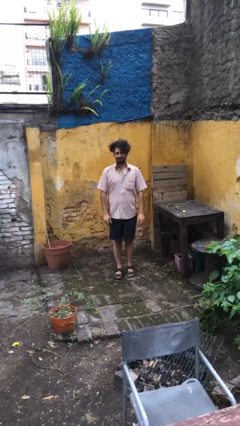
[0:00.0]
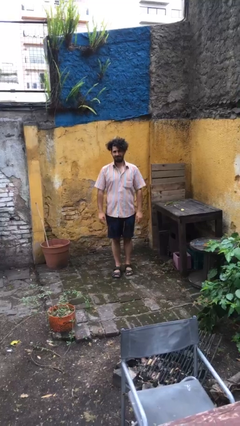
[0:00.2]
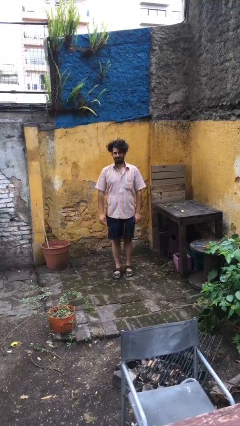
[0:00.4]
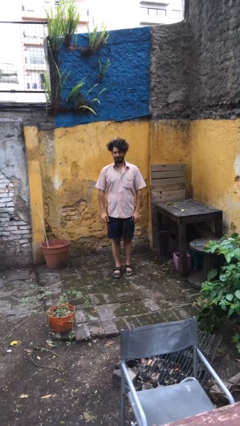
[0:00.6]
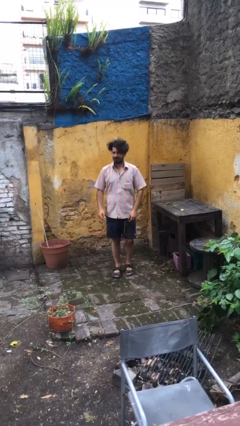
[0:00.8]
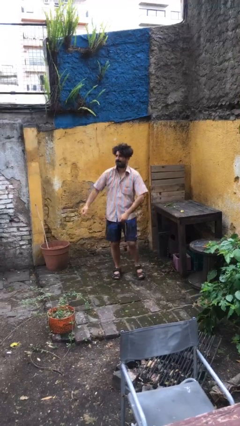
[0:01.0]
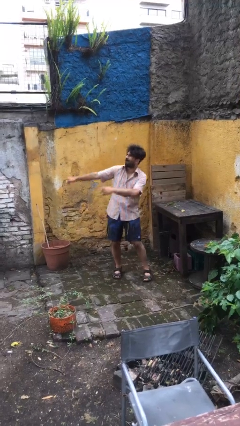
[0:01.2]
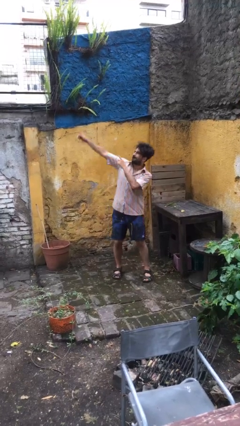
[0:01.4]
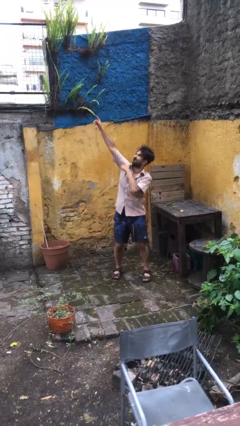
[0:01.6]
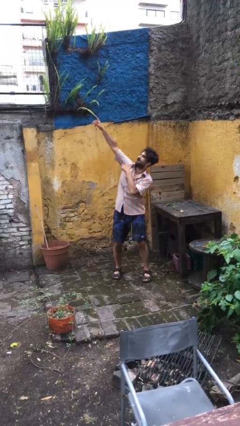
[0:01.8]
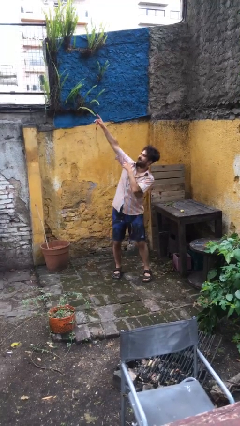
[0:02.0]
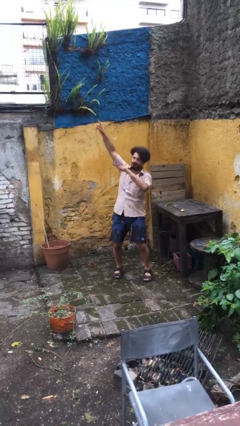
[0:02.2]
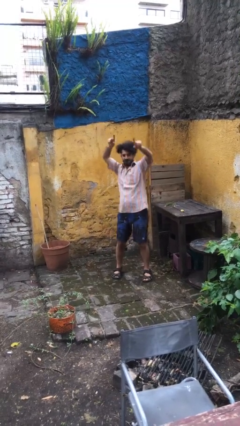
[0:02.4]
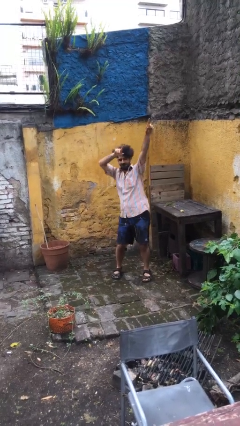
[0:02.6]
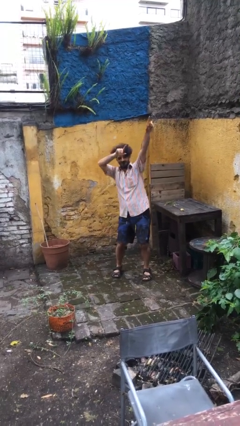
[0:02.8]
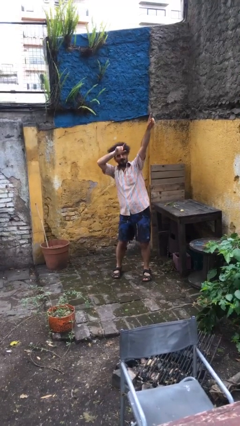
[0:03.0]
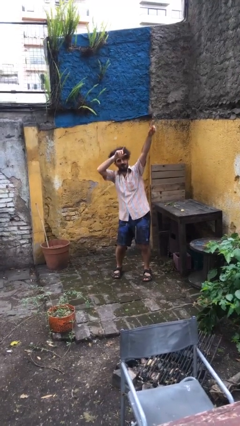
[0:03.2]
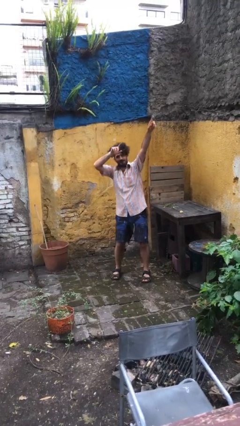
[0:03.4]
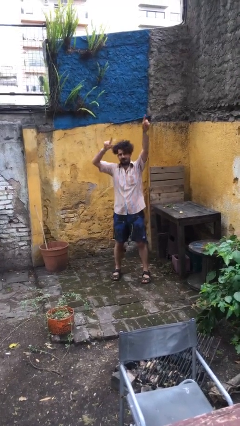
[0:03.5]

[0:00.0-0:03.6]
person dances in place

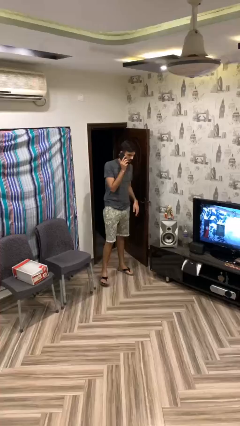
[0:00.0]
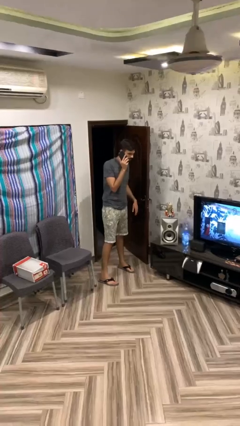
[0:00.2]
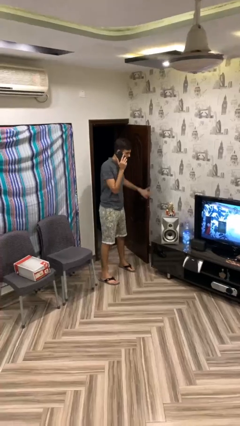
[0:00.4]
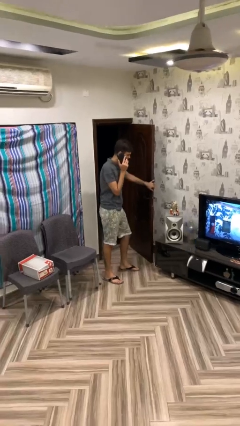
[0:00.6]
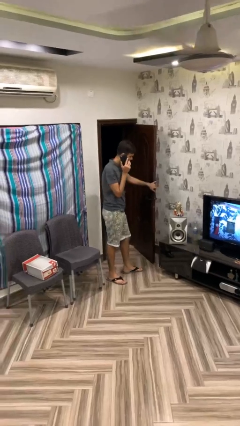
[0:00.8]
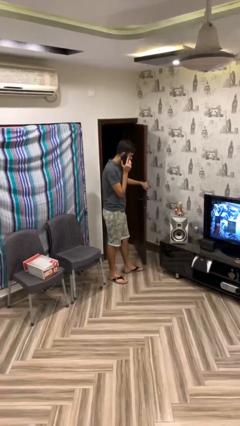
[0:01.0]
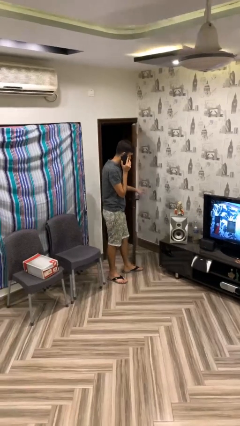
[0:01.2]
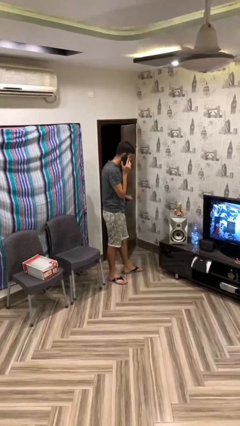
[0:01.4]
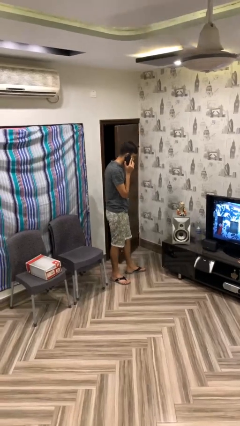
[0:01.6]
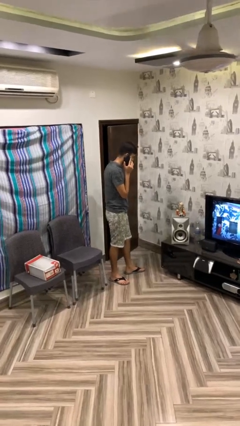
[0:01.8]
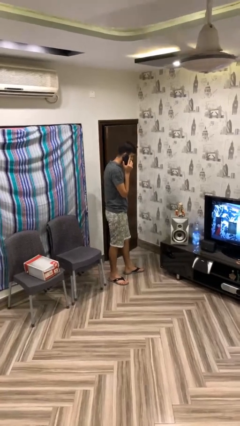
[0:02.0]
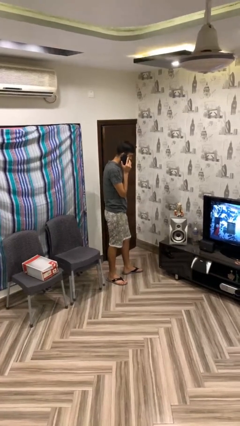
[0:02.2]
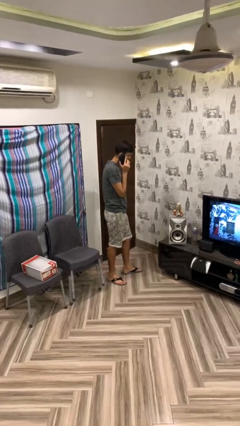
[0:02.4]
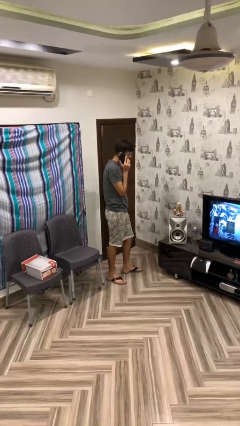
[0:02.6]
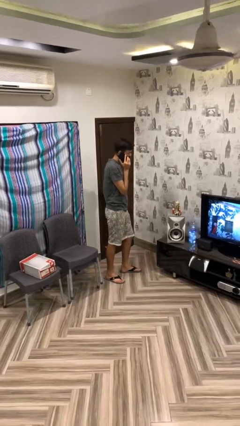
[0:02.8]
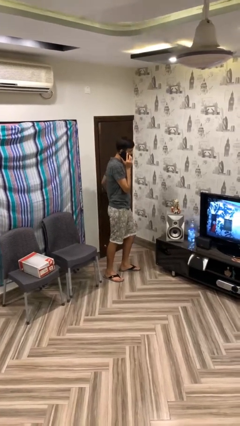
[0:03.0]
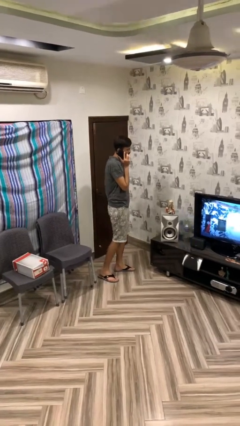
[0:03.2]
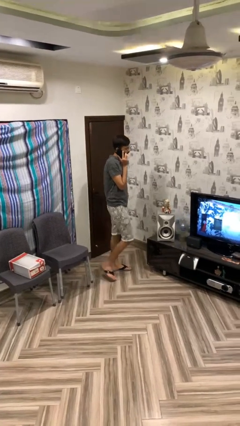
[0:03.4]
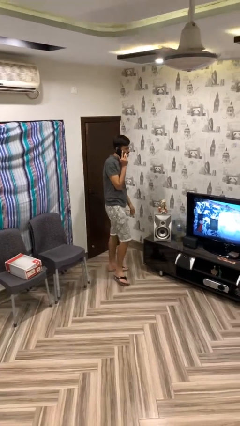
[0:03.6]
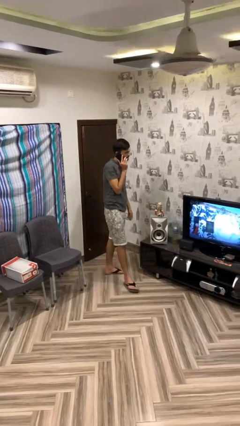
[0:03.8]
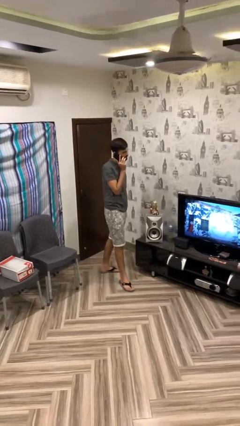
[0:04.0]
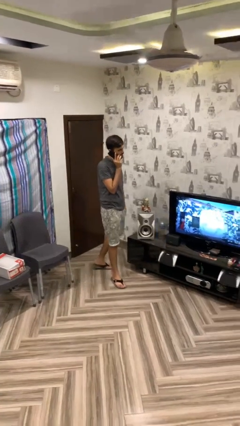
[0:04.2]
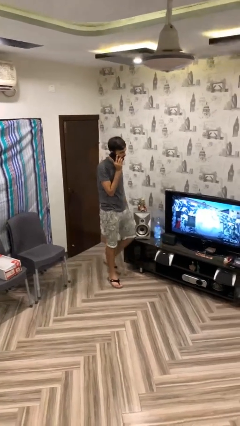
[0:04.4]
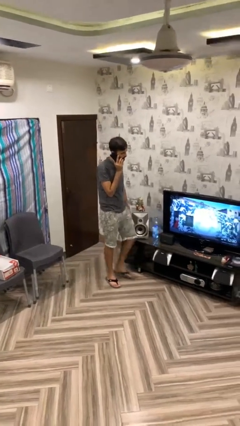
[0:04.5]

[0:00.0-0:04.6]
person closes facility door

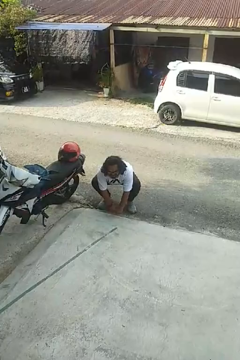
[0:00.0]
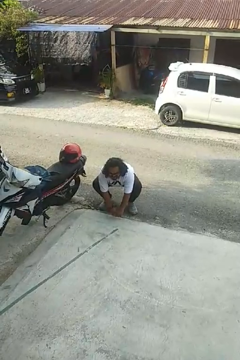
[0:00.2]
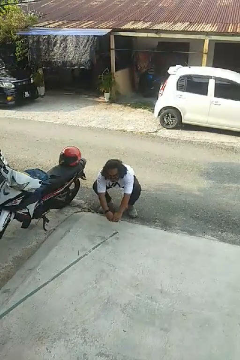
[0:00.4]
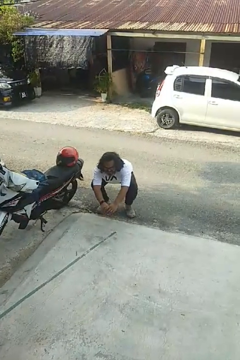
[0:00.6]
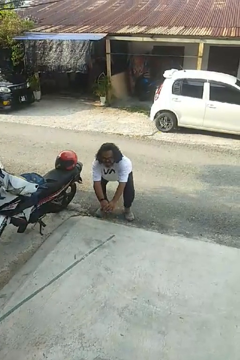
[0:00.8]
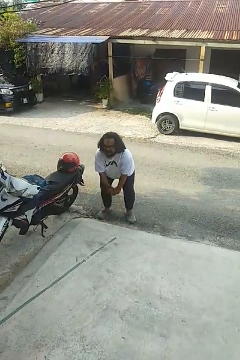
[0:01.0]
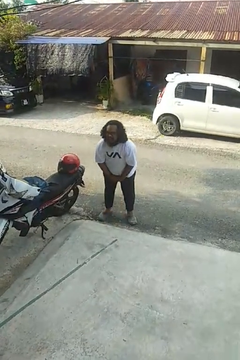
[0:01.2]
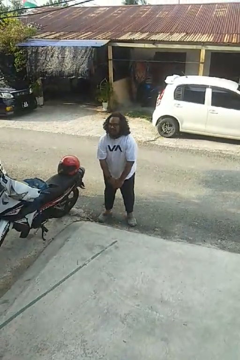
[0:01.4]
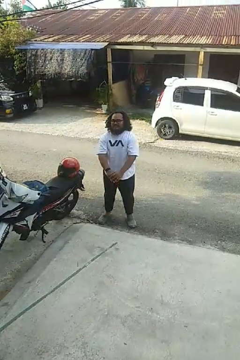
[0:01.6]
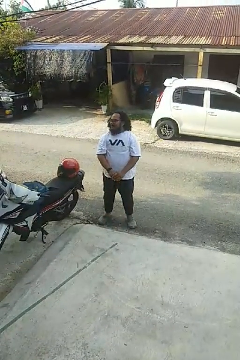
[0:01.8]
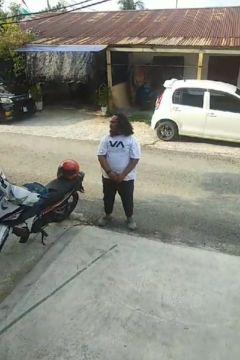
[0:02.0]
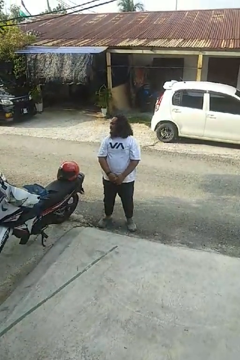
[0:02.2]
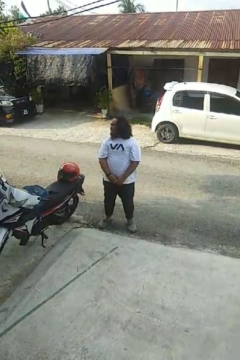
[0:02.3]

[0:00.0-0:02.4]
person stands up

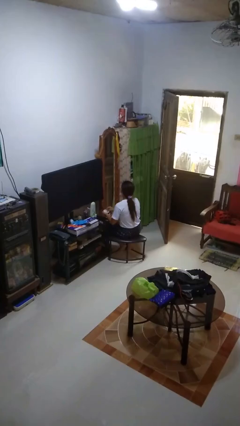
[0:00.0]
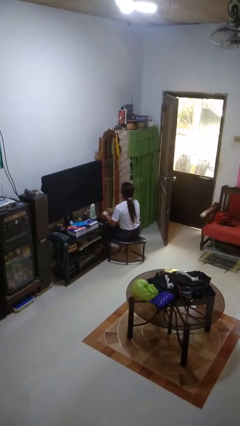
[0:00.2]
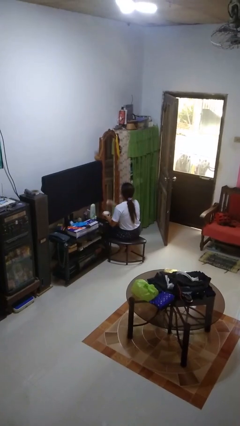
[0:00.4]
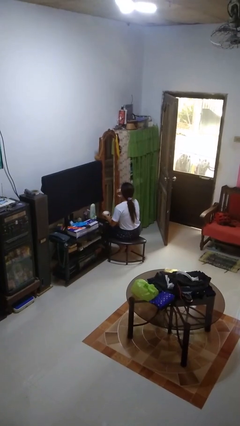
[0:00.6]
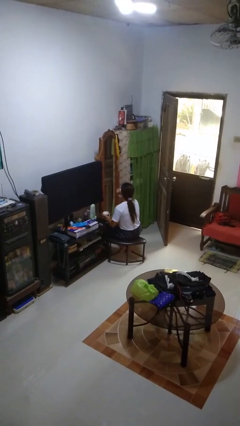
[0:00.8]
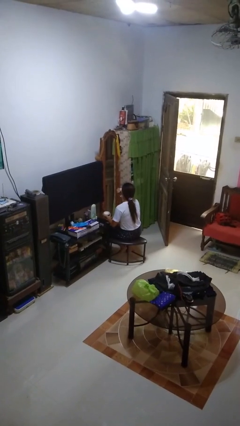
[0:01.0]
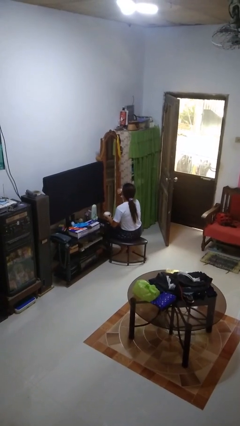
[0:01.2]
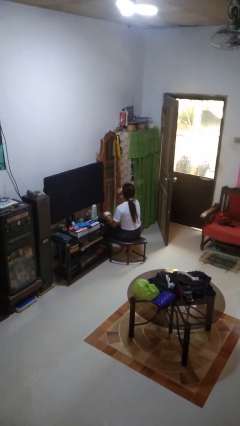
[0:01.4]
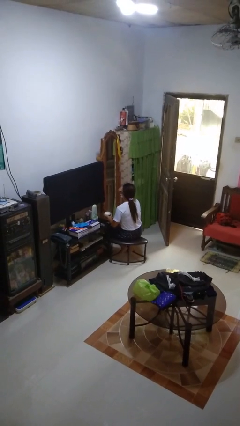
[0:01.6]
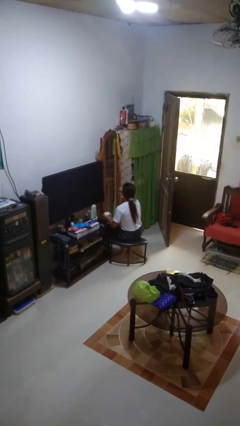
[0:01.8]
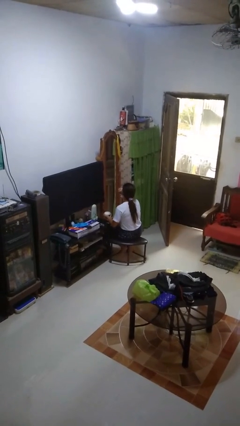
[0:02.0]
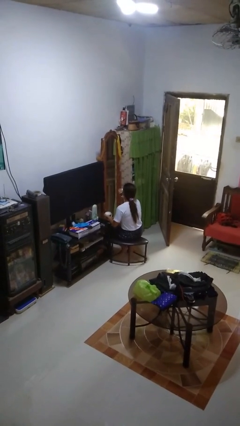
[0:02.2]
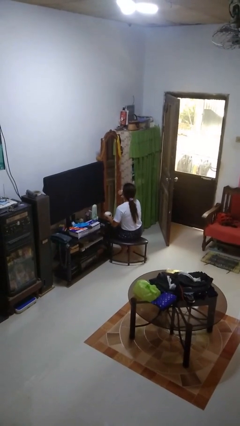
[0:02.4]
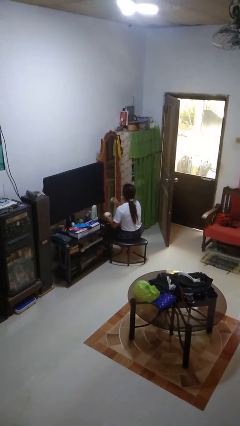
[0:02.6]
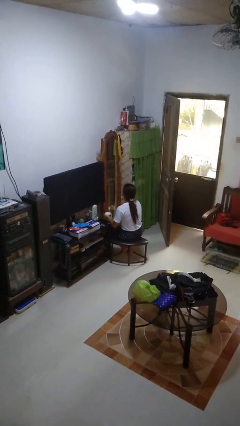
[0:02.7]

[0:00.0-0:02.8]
person applies foundation makeup

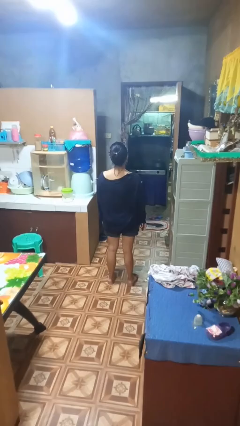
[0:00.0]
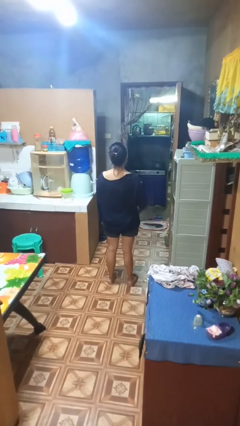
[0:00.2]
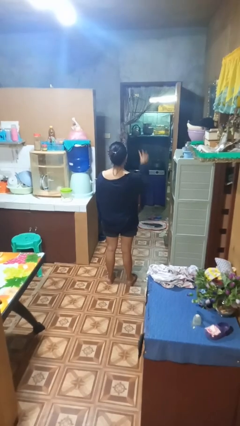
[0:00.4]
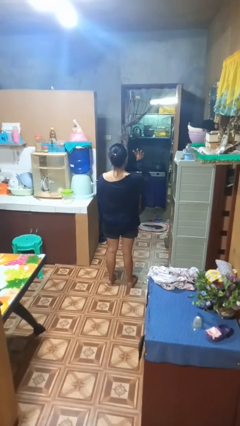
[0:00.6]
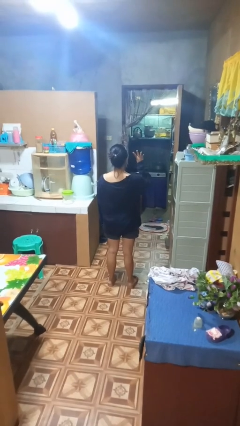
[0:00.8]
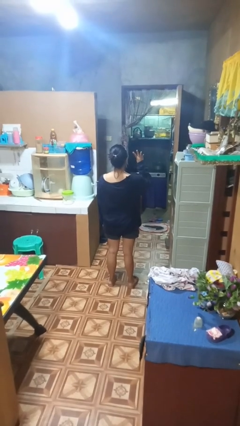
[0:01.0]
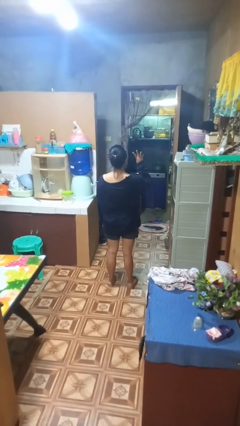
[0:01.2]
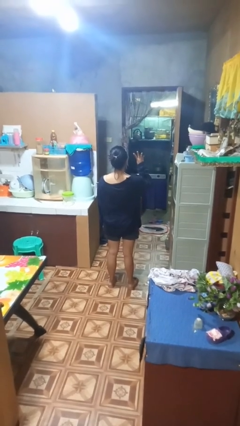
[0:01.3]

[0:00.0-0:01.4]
person gestures number four

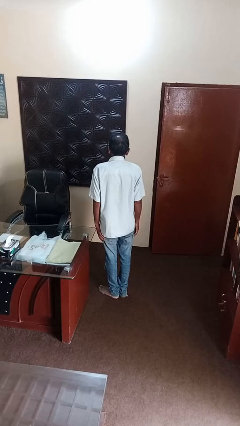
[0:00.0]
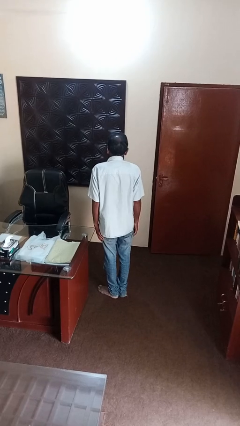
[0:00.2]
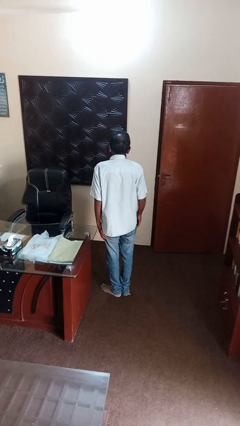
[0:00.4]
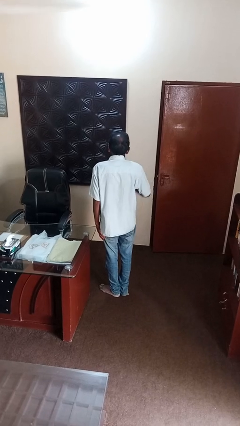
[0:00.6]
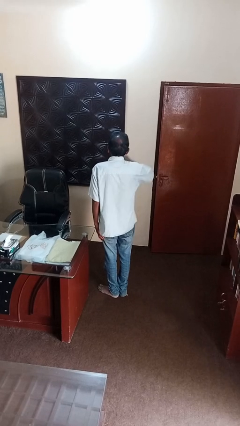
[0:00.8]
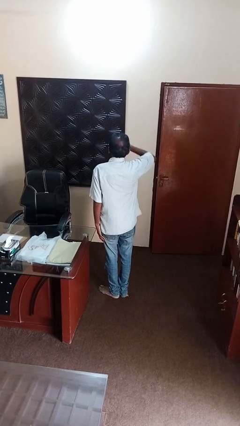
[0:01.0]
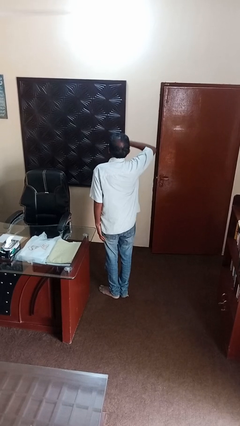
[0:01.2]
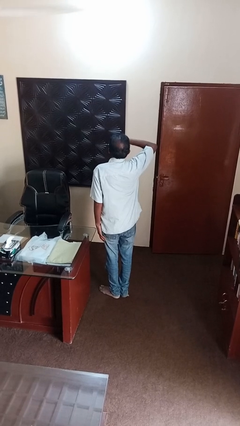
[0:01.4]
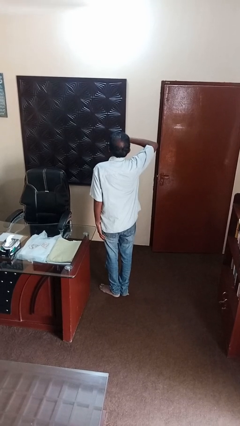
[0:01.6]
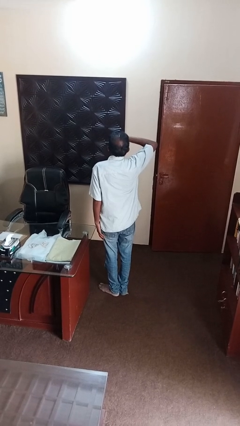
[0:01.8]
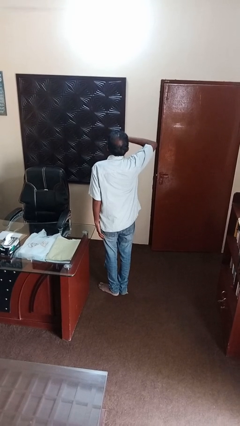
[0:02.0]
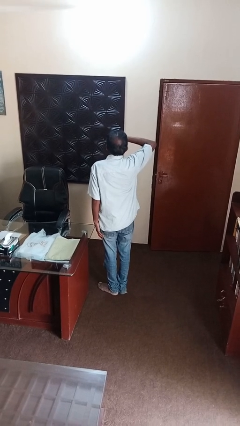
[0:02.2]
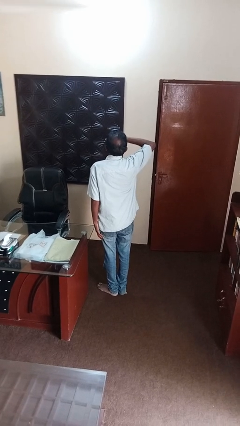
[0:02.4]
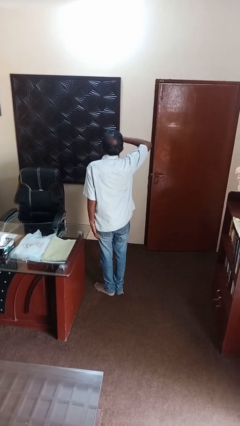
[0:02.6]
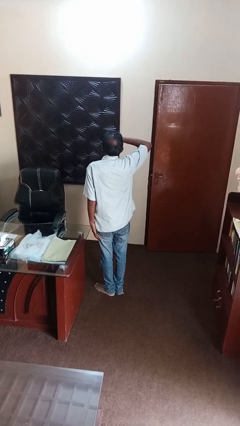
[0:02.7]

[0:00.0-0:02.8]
person yawns

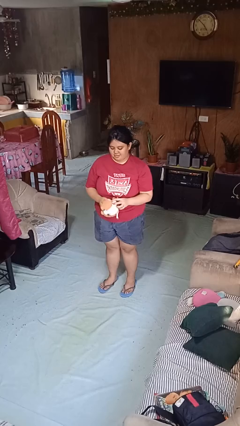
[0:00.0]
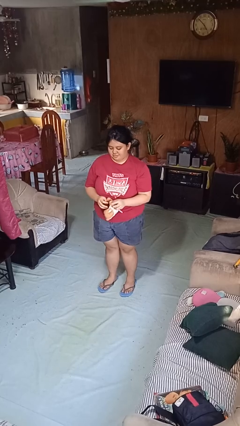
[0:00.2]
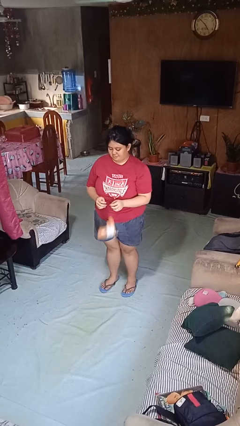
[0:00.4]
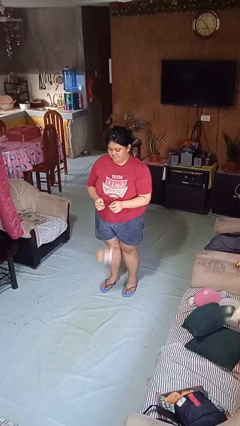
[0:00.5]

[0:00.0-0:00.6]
person drops object
